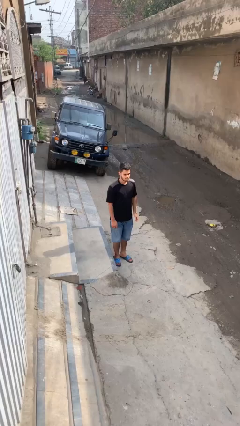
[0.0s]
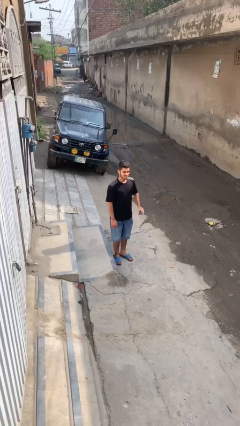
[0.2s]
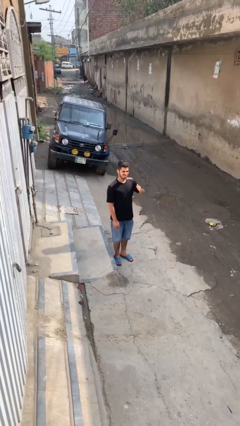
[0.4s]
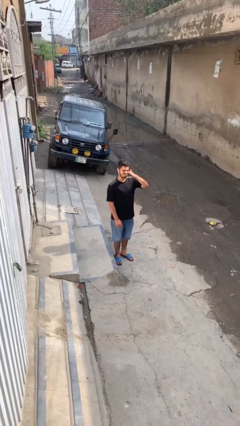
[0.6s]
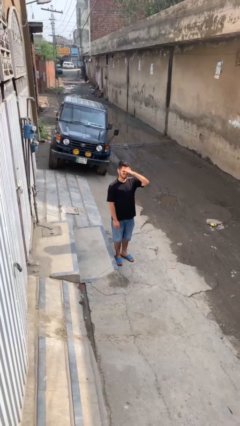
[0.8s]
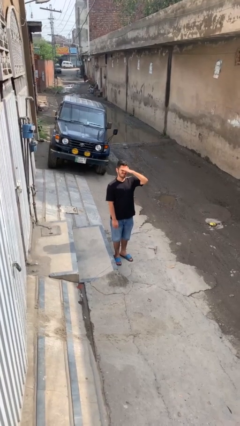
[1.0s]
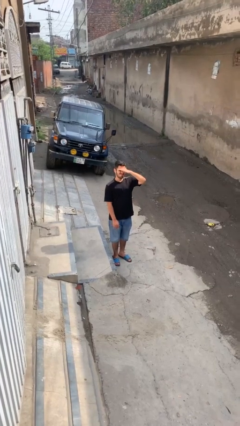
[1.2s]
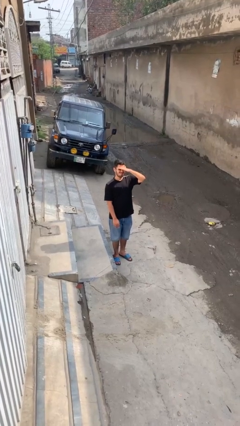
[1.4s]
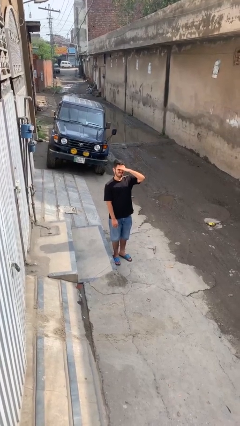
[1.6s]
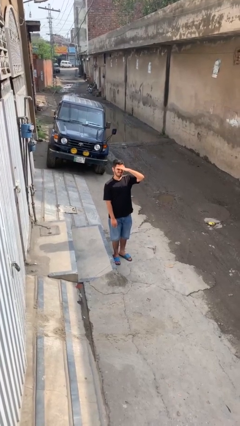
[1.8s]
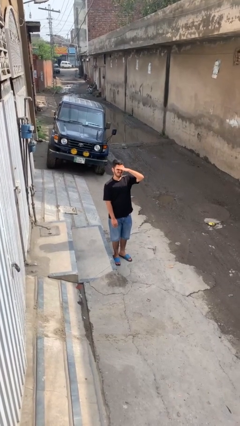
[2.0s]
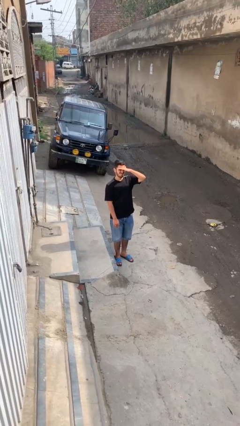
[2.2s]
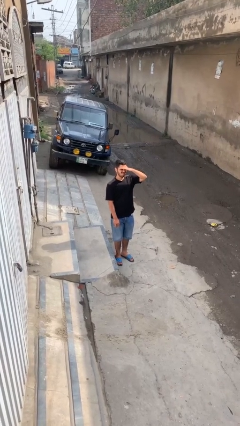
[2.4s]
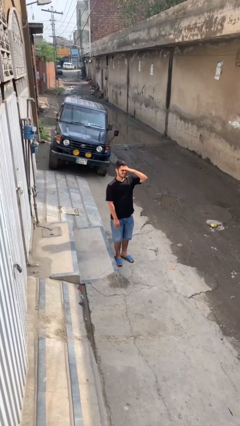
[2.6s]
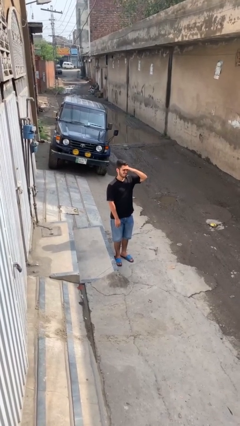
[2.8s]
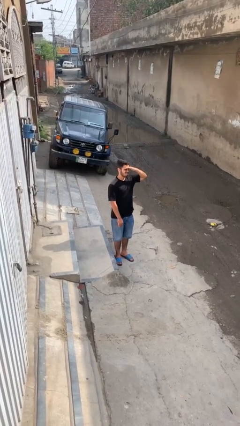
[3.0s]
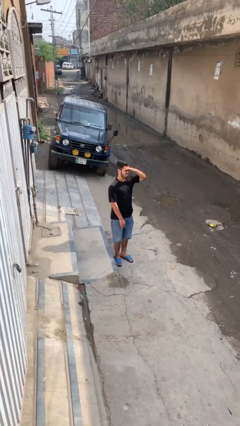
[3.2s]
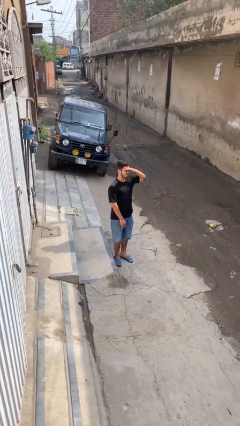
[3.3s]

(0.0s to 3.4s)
person shades eyes

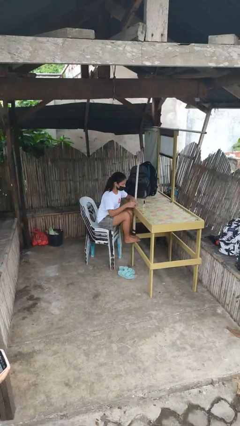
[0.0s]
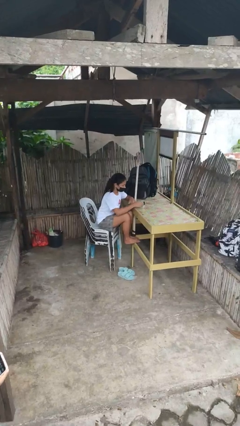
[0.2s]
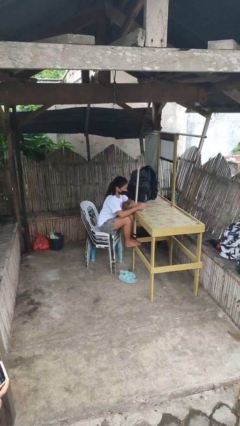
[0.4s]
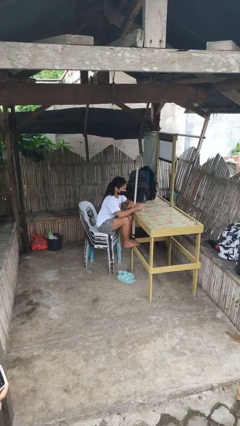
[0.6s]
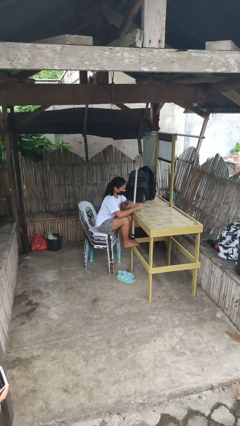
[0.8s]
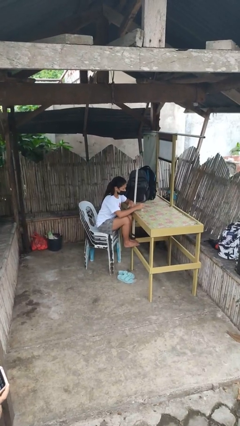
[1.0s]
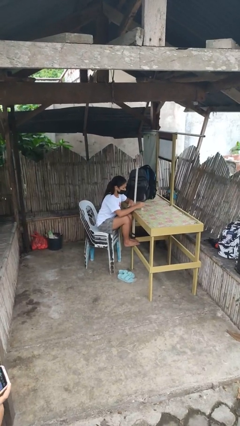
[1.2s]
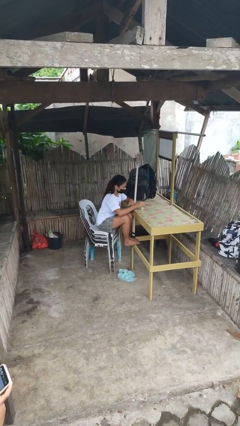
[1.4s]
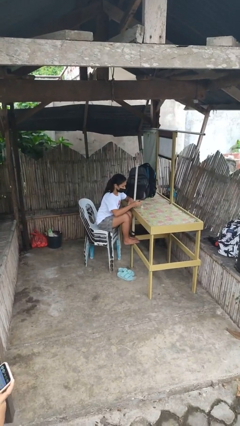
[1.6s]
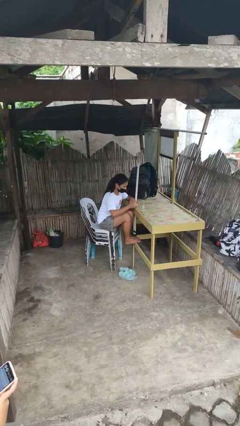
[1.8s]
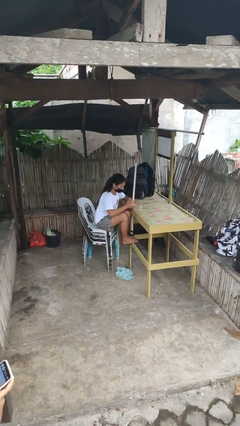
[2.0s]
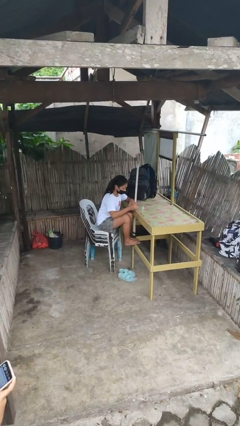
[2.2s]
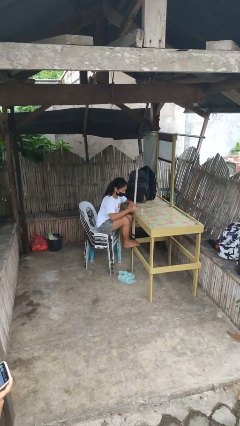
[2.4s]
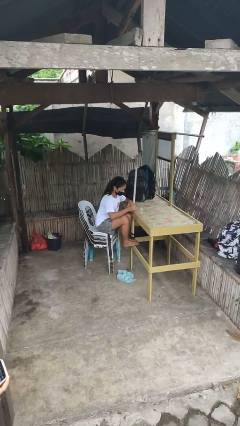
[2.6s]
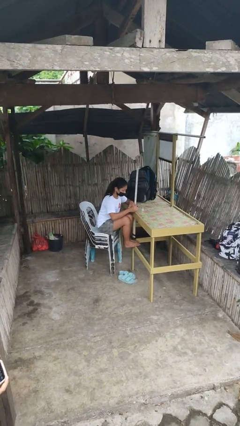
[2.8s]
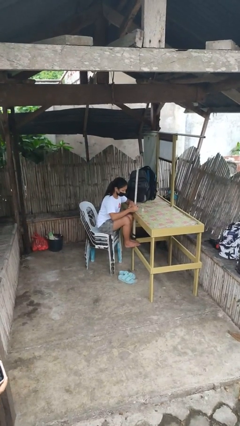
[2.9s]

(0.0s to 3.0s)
person paints fingernails

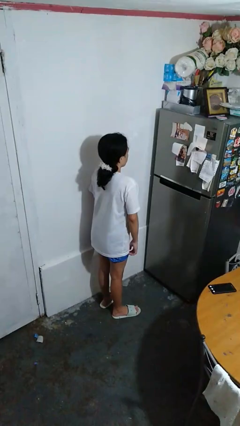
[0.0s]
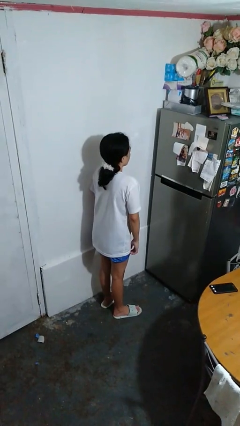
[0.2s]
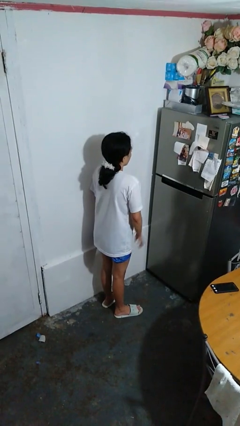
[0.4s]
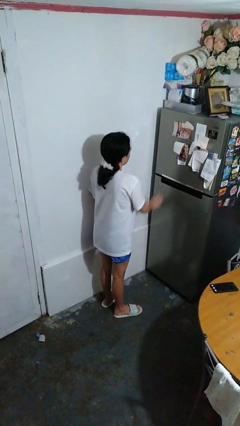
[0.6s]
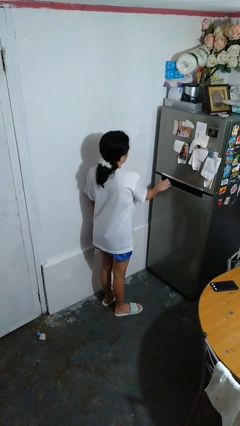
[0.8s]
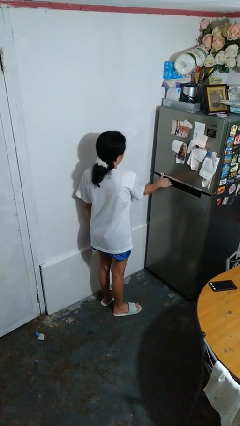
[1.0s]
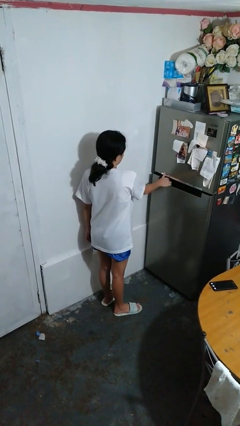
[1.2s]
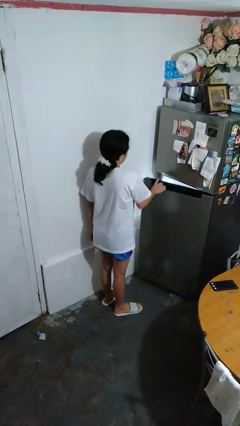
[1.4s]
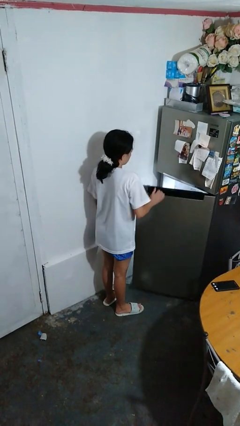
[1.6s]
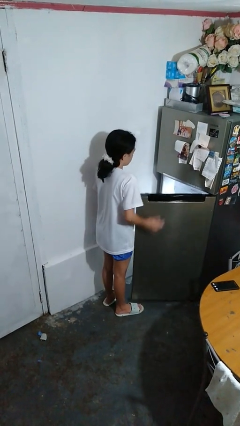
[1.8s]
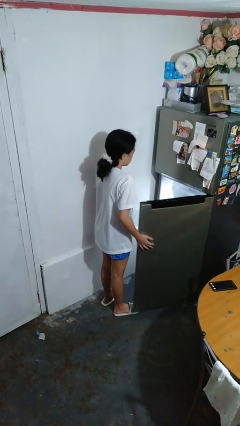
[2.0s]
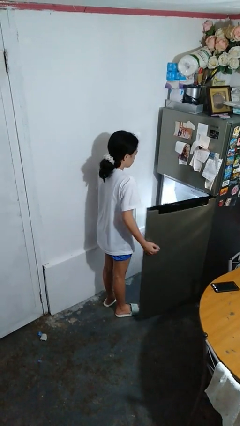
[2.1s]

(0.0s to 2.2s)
person opens refrigerator

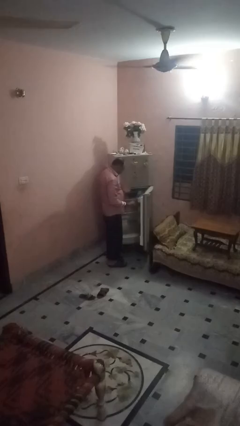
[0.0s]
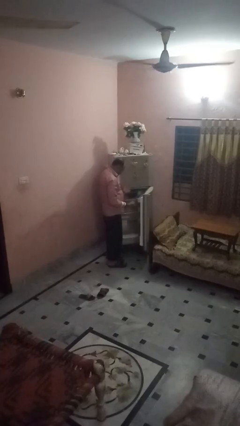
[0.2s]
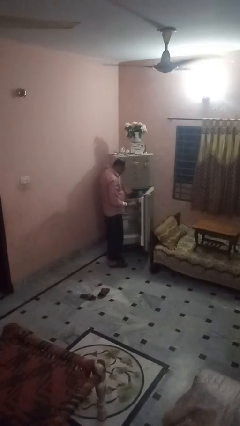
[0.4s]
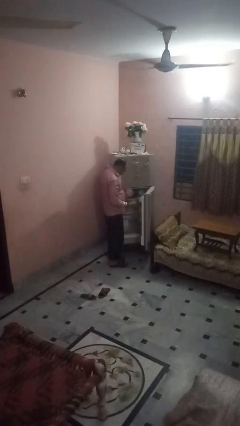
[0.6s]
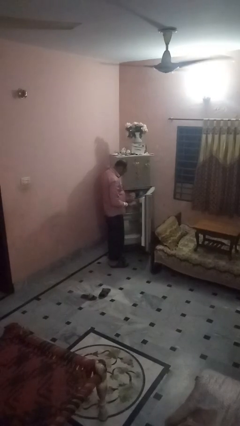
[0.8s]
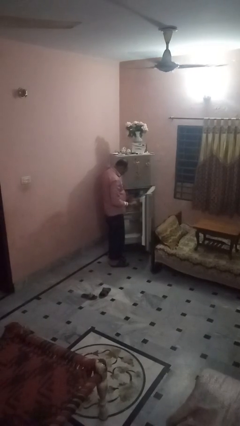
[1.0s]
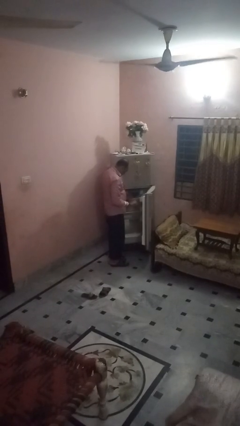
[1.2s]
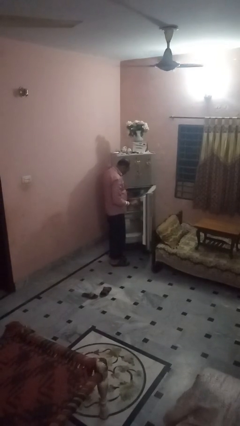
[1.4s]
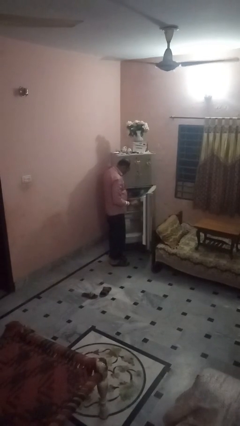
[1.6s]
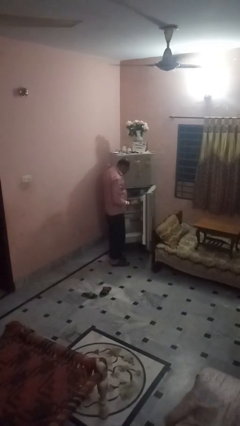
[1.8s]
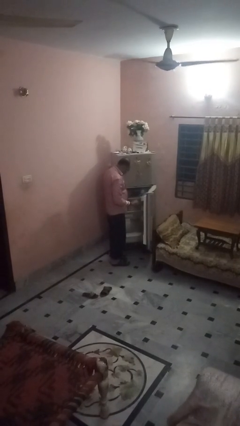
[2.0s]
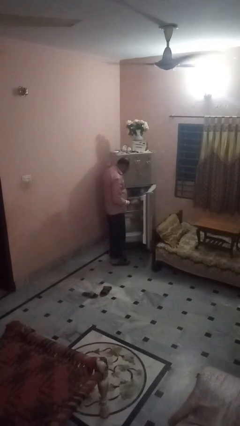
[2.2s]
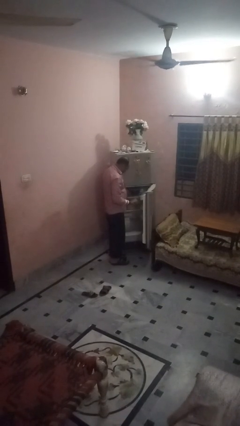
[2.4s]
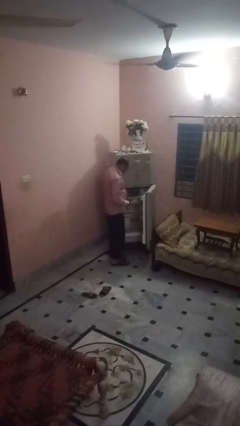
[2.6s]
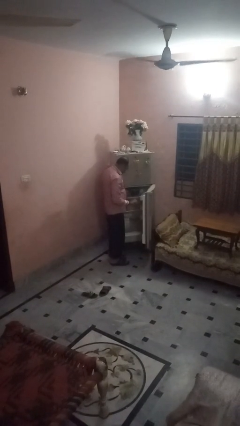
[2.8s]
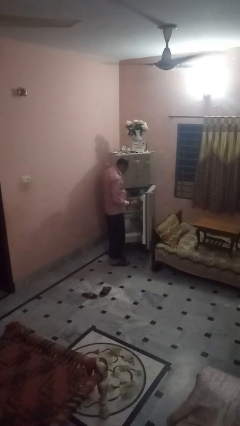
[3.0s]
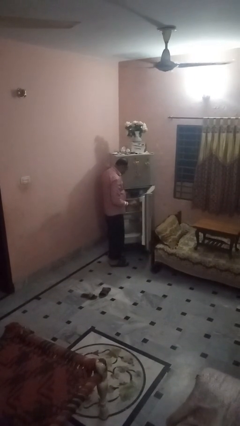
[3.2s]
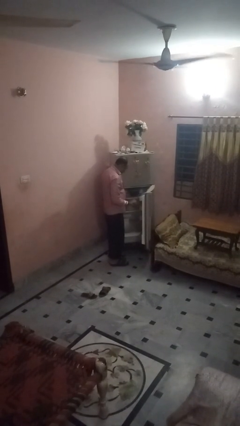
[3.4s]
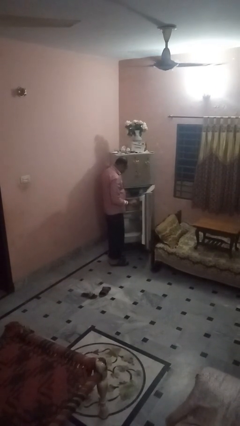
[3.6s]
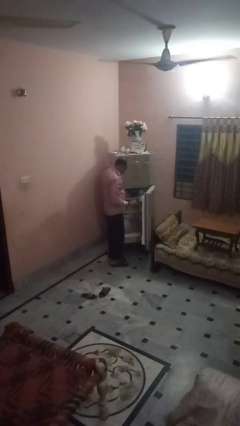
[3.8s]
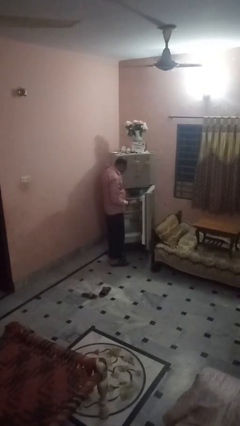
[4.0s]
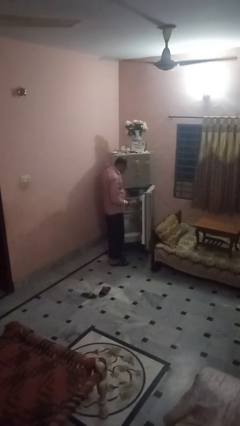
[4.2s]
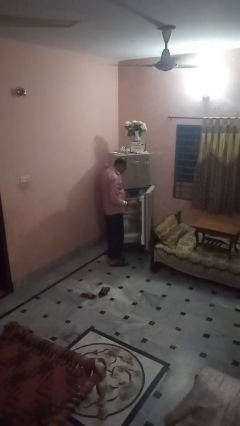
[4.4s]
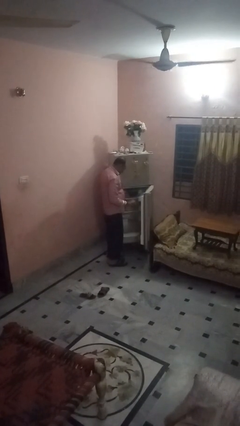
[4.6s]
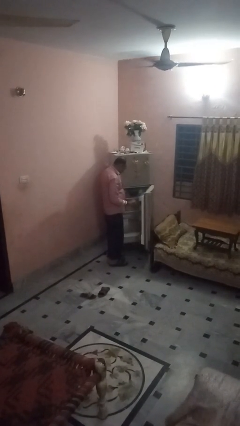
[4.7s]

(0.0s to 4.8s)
person takes object from refrigerator

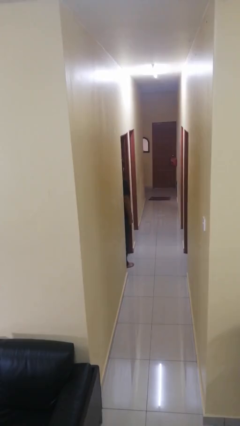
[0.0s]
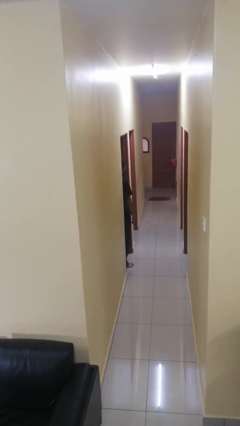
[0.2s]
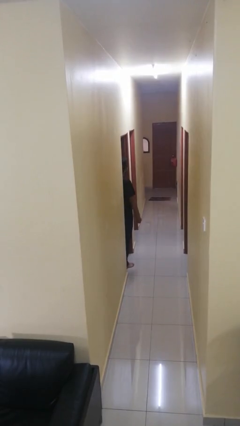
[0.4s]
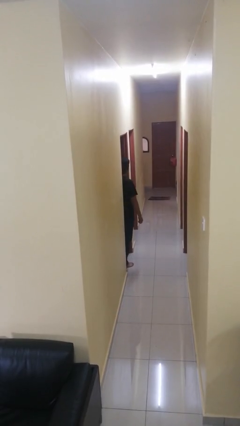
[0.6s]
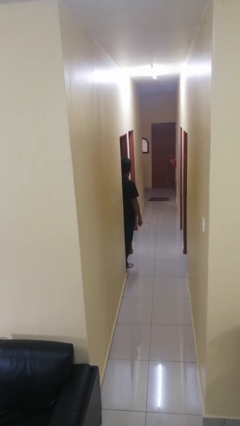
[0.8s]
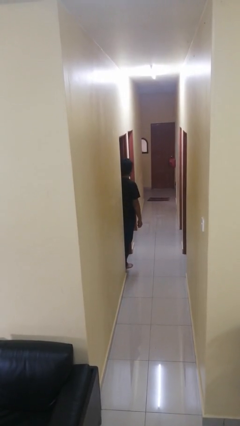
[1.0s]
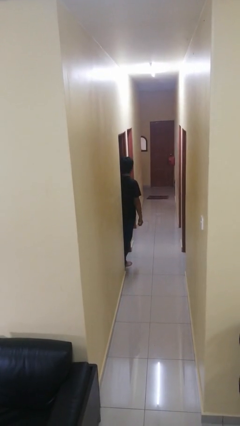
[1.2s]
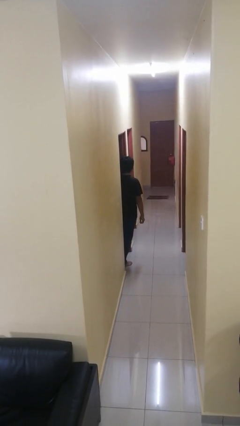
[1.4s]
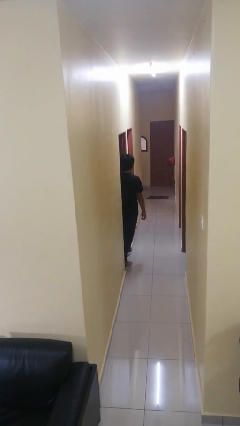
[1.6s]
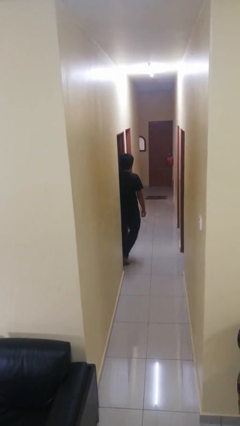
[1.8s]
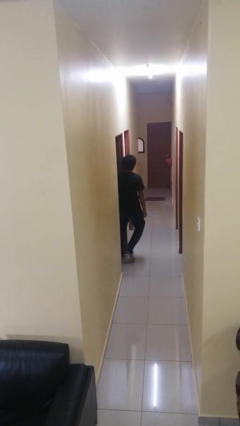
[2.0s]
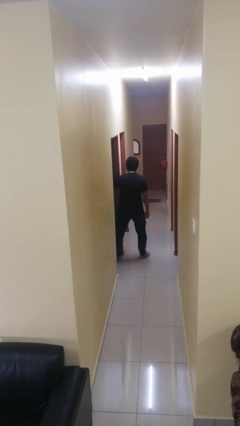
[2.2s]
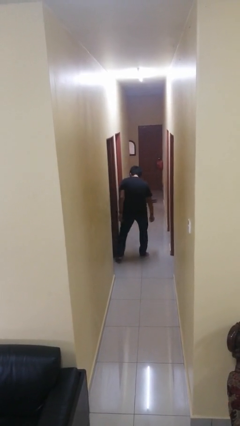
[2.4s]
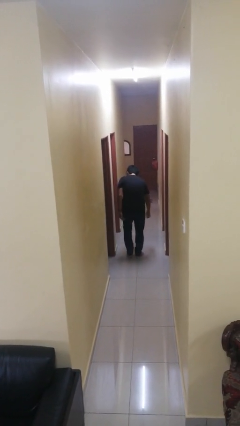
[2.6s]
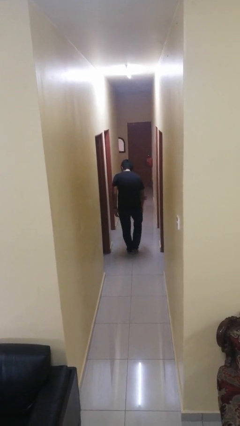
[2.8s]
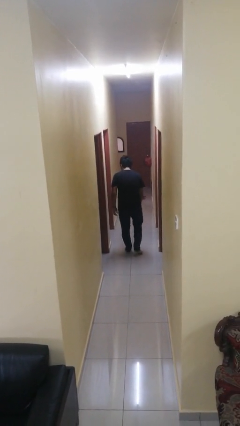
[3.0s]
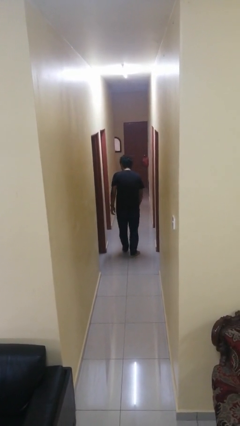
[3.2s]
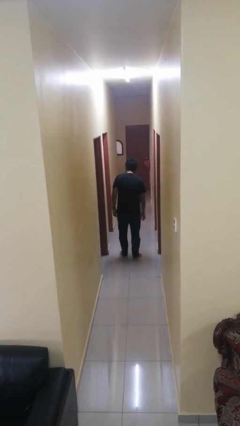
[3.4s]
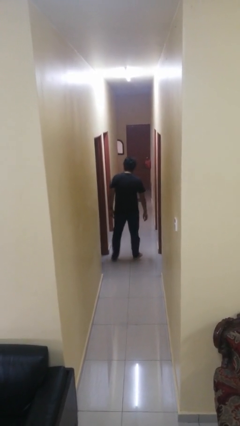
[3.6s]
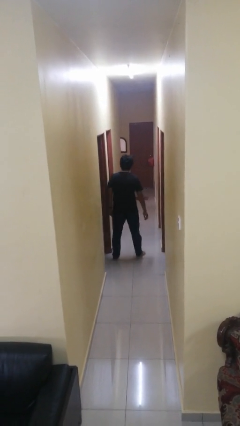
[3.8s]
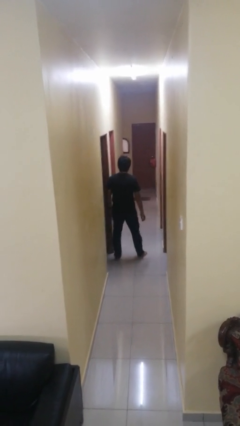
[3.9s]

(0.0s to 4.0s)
person bumps into wall

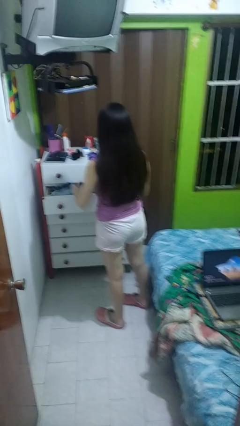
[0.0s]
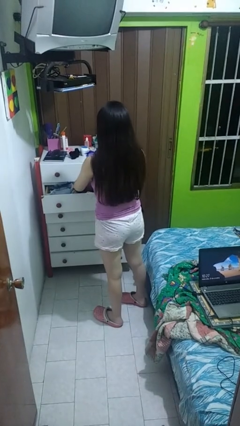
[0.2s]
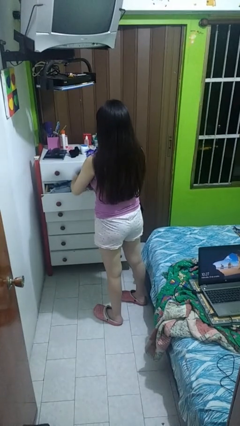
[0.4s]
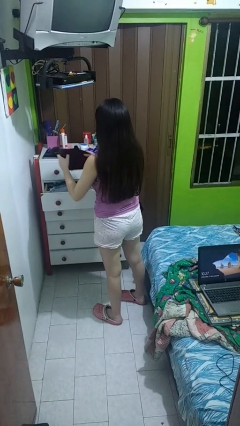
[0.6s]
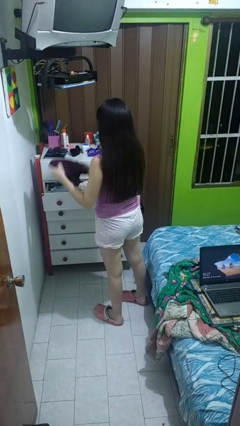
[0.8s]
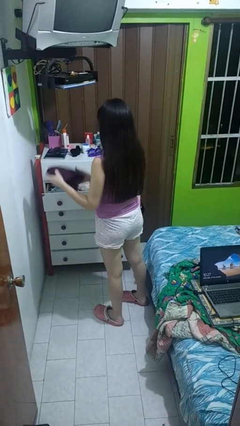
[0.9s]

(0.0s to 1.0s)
person takes clothes from dresser
